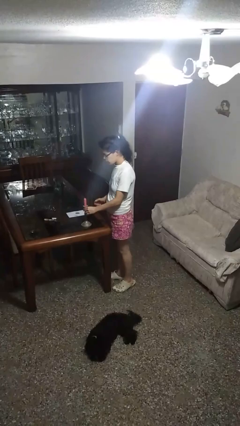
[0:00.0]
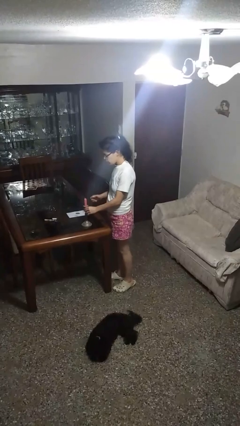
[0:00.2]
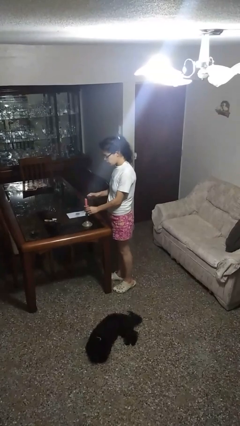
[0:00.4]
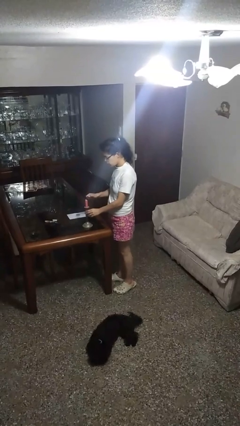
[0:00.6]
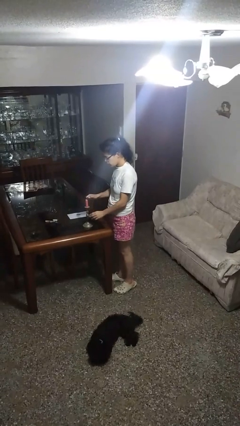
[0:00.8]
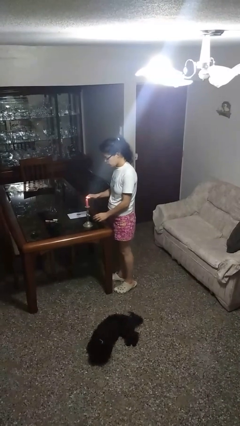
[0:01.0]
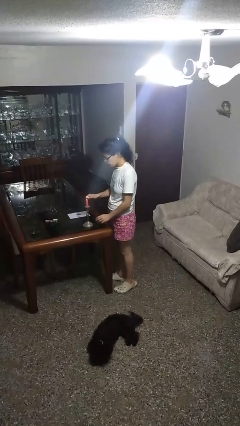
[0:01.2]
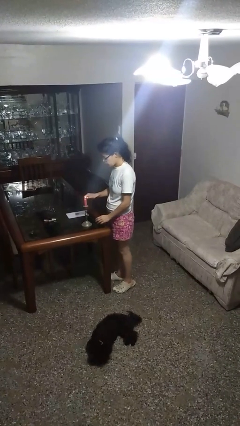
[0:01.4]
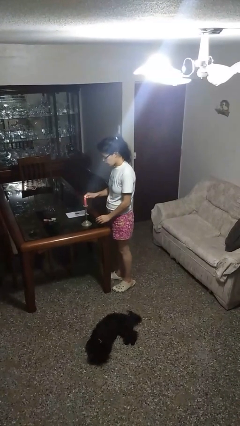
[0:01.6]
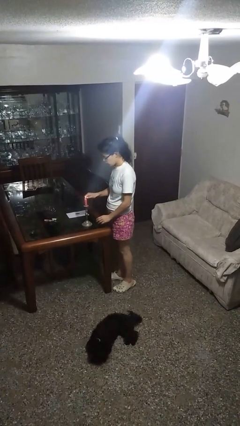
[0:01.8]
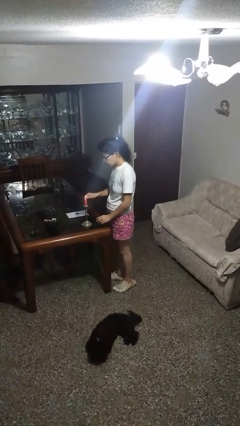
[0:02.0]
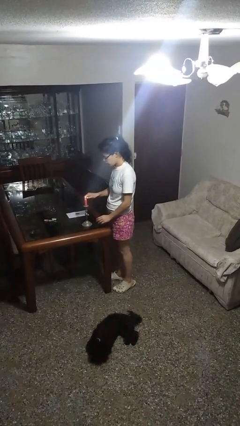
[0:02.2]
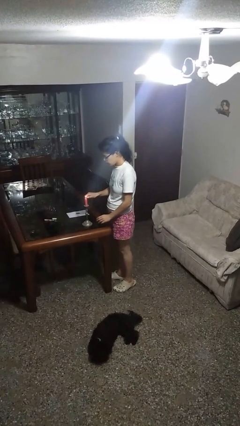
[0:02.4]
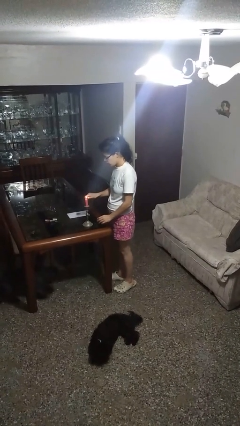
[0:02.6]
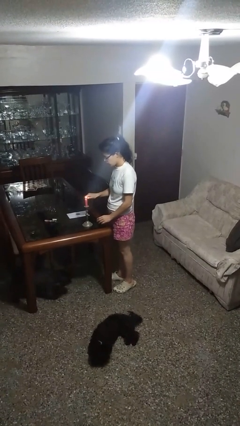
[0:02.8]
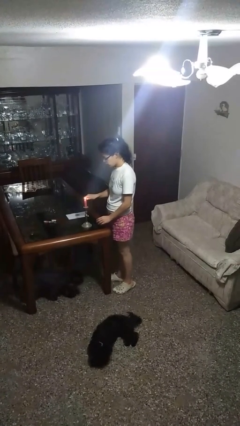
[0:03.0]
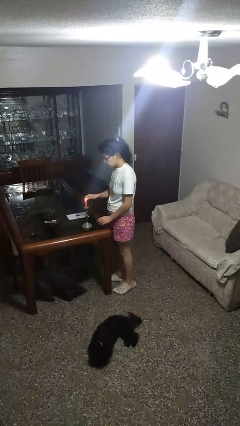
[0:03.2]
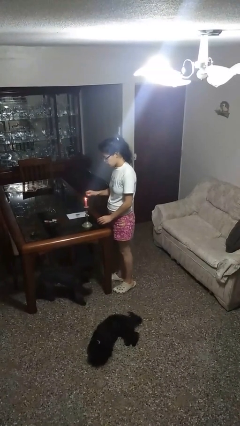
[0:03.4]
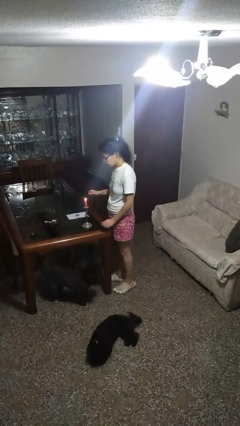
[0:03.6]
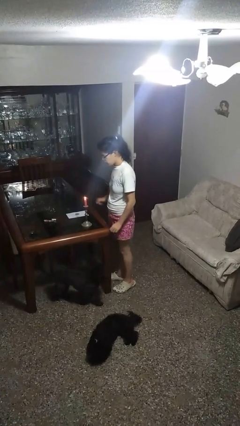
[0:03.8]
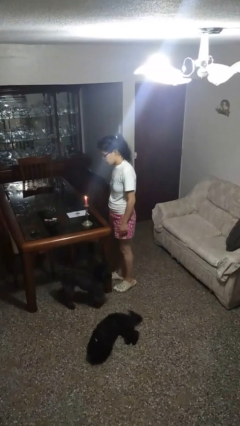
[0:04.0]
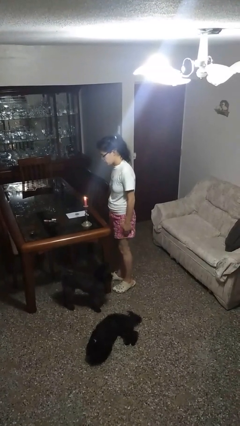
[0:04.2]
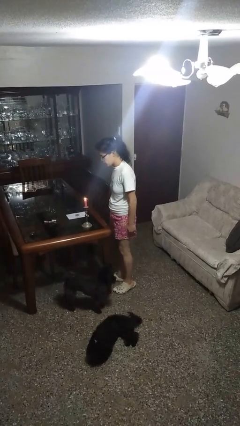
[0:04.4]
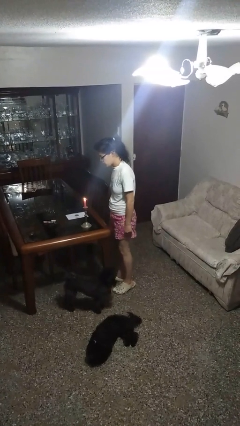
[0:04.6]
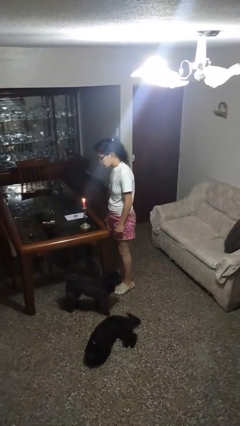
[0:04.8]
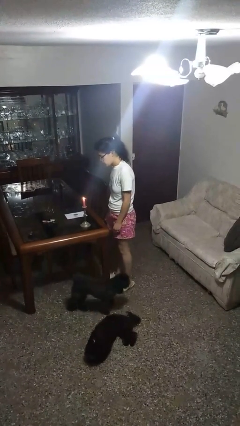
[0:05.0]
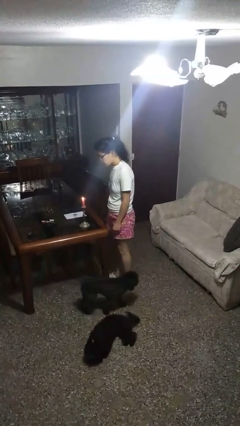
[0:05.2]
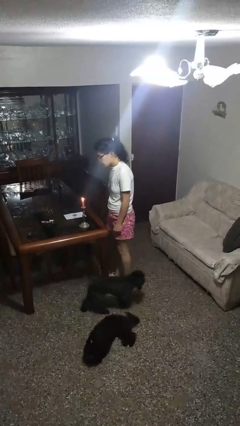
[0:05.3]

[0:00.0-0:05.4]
person lights candle

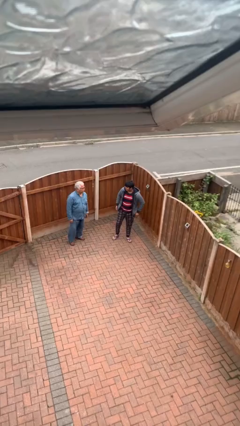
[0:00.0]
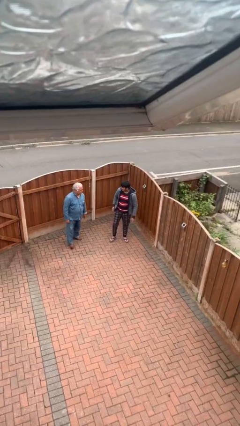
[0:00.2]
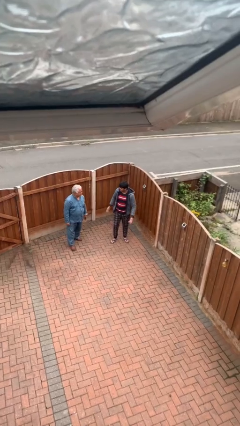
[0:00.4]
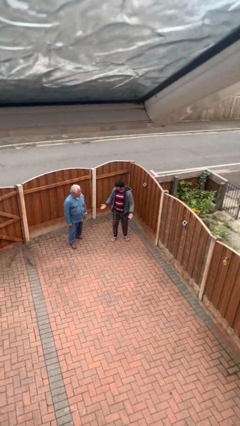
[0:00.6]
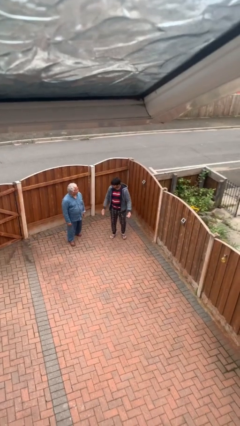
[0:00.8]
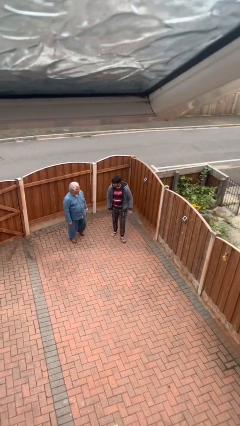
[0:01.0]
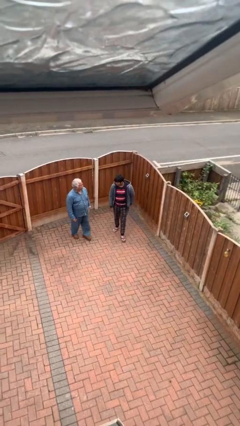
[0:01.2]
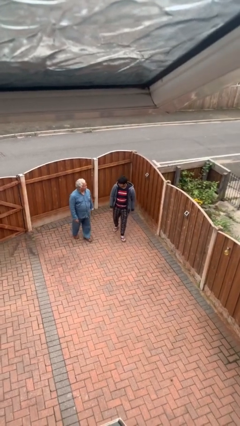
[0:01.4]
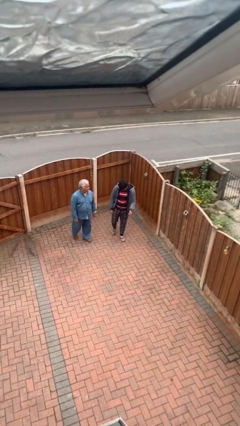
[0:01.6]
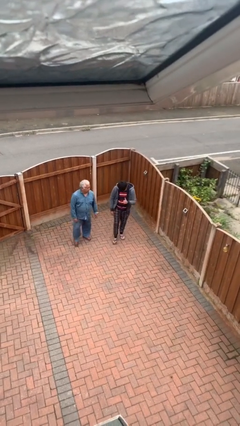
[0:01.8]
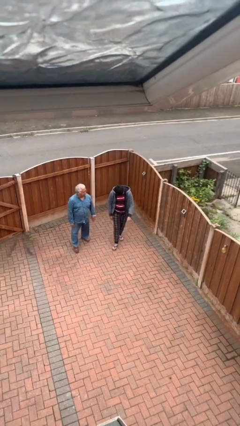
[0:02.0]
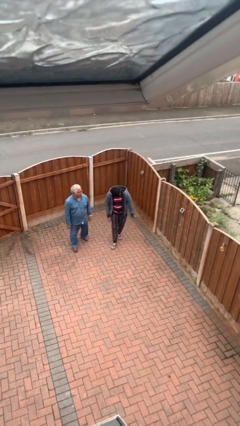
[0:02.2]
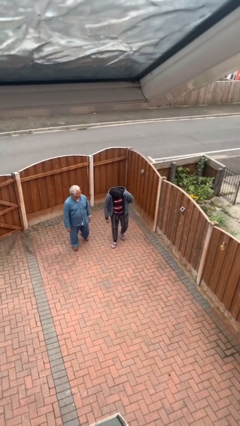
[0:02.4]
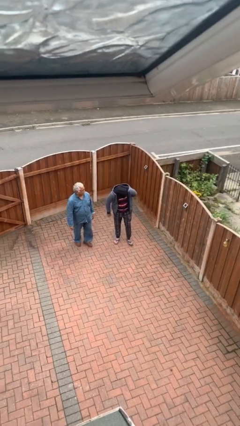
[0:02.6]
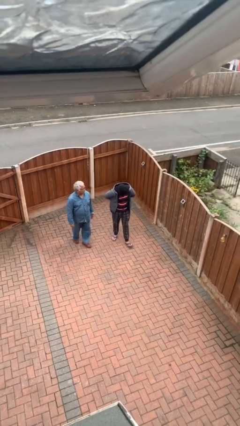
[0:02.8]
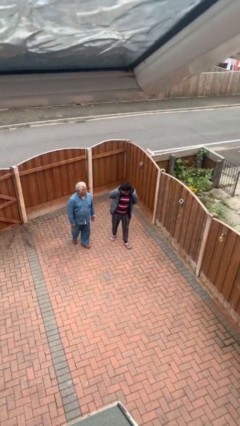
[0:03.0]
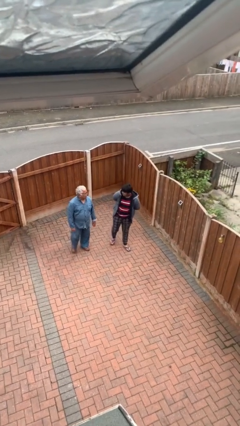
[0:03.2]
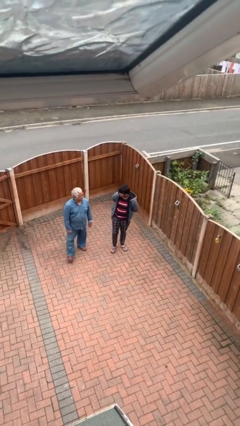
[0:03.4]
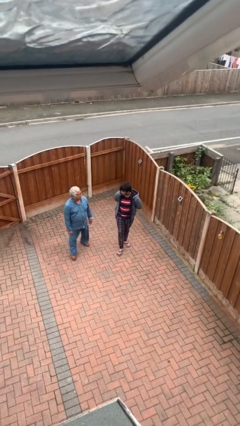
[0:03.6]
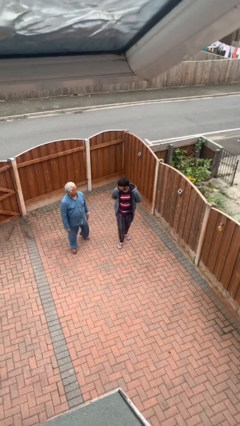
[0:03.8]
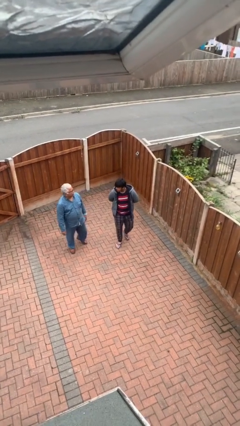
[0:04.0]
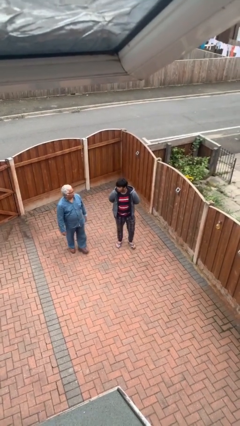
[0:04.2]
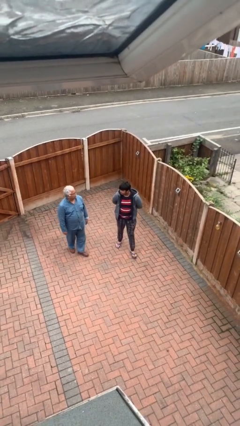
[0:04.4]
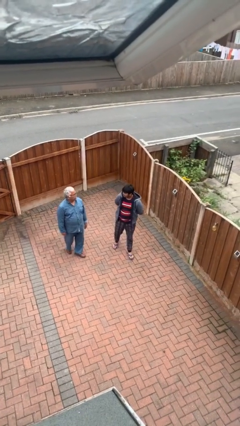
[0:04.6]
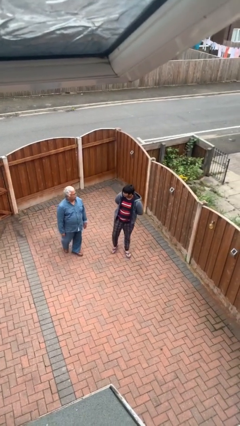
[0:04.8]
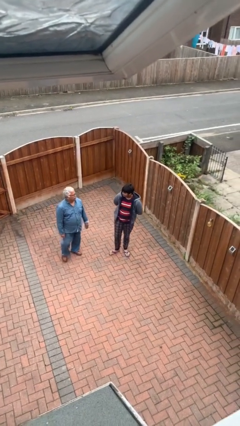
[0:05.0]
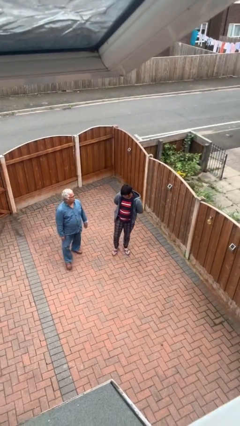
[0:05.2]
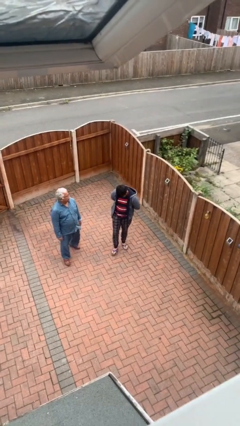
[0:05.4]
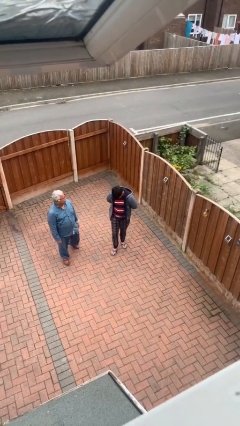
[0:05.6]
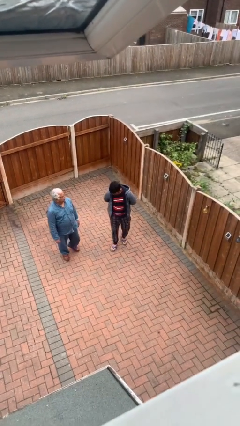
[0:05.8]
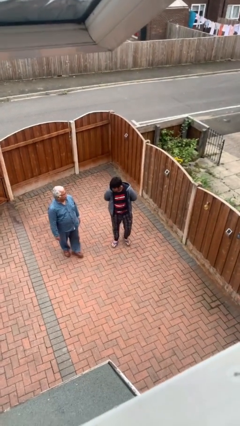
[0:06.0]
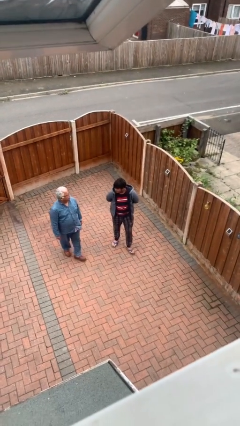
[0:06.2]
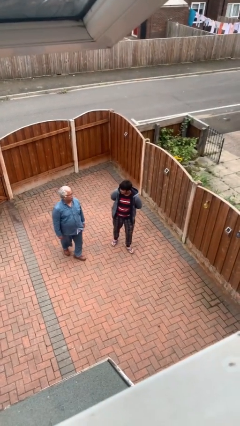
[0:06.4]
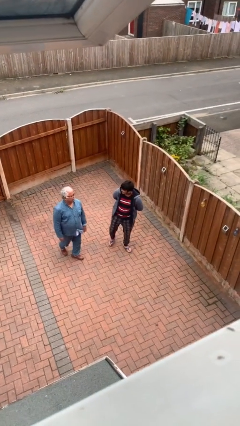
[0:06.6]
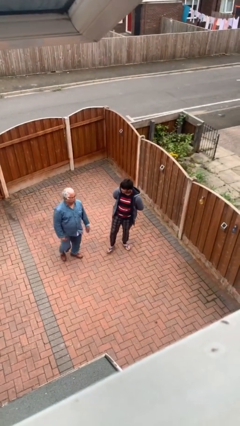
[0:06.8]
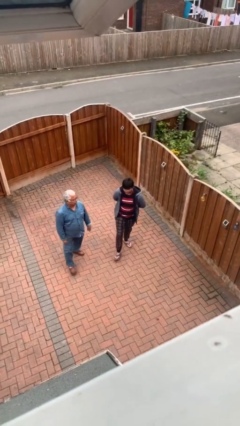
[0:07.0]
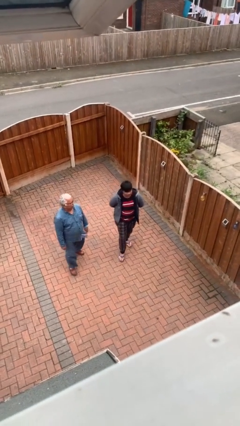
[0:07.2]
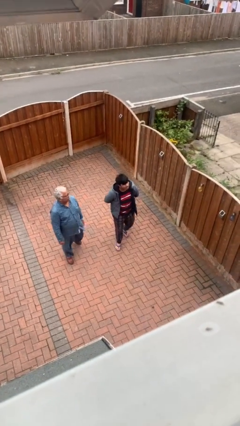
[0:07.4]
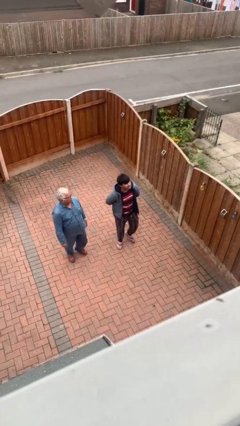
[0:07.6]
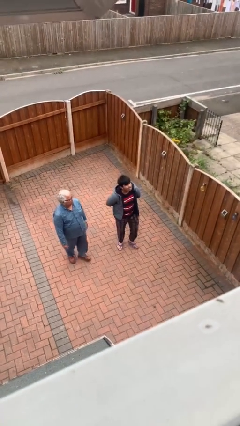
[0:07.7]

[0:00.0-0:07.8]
person talks to person

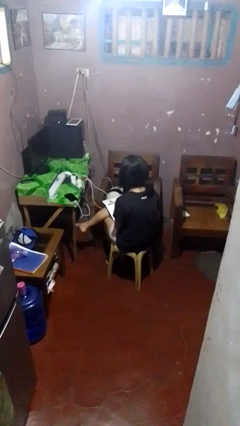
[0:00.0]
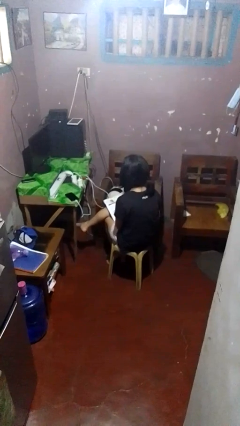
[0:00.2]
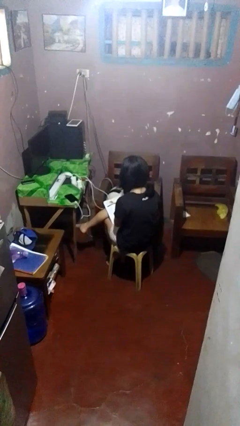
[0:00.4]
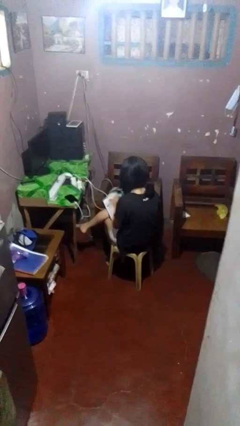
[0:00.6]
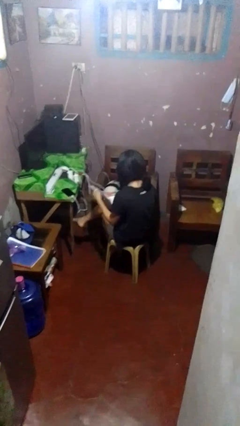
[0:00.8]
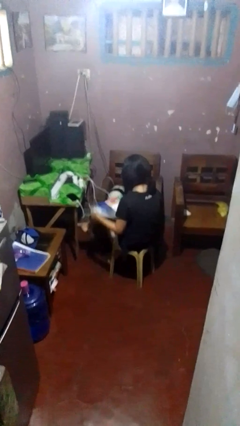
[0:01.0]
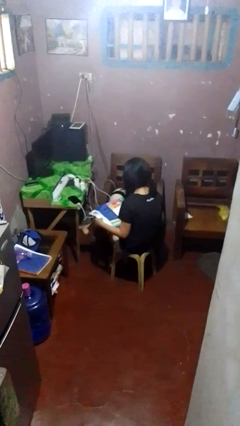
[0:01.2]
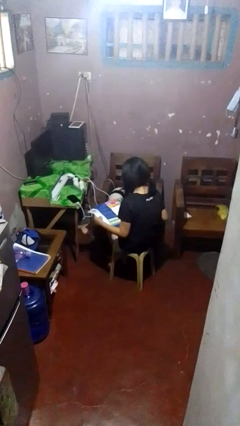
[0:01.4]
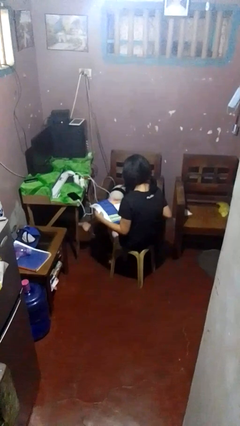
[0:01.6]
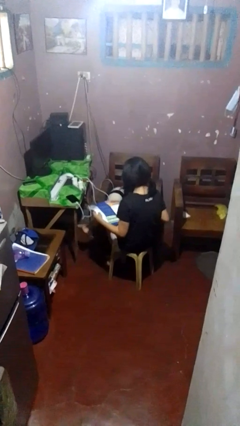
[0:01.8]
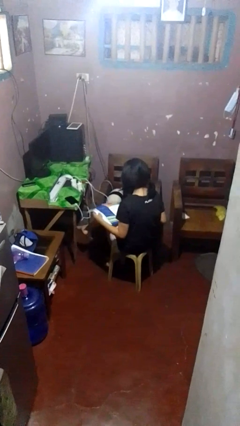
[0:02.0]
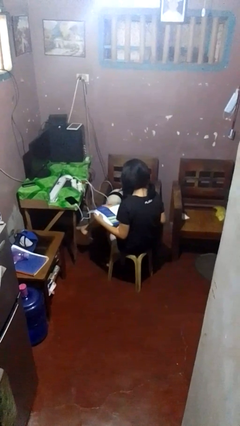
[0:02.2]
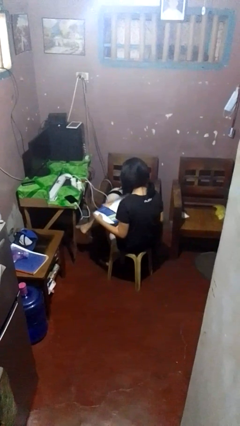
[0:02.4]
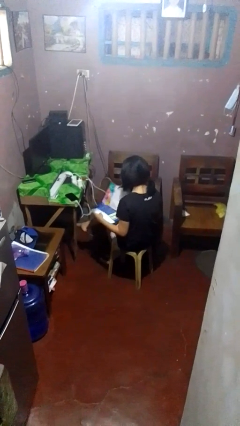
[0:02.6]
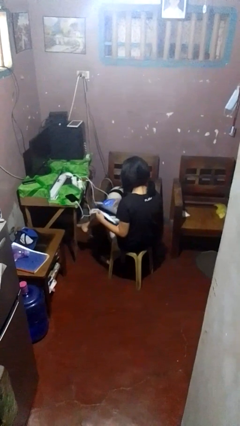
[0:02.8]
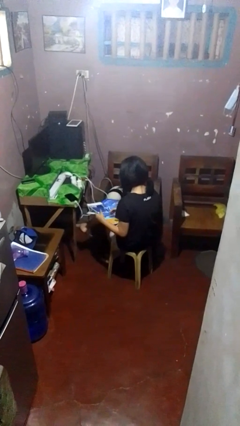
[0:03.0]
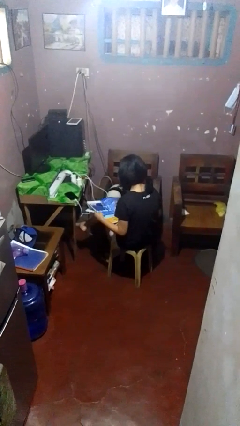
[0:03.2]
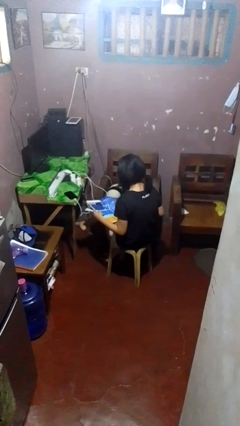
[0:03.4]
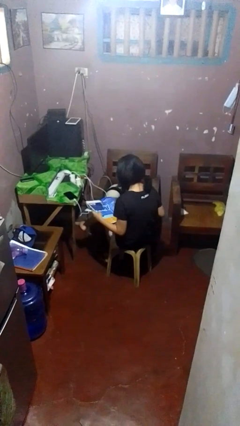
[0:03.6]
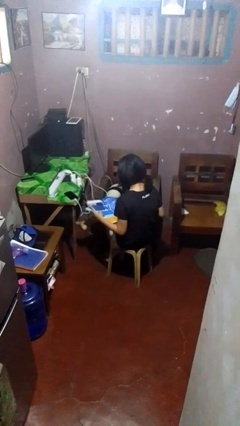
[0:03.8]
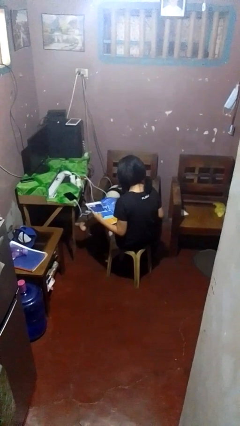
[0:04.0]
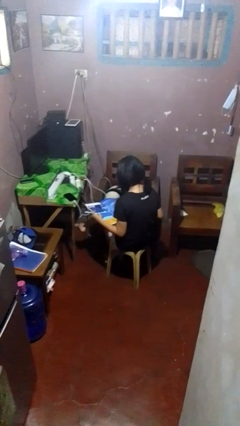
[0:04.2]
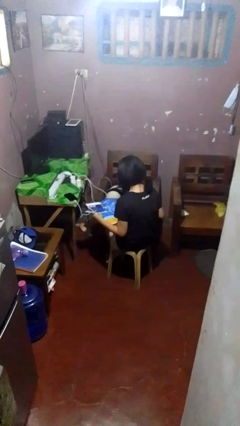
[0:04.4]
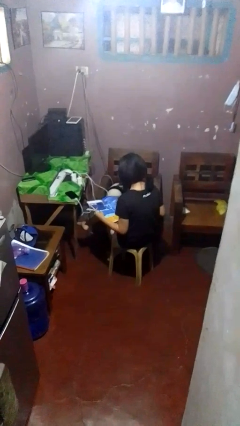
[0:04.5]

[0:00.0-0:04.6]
person reads magazine

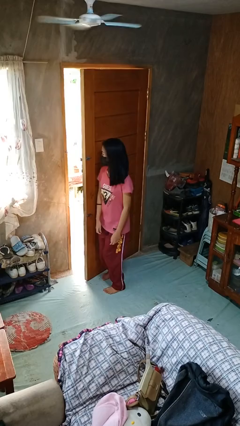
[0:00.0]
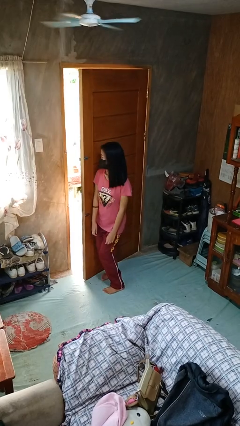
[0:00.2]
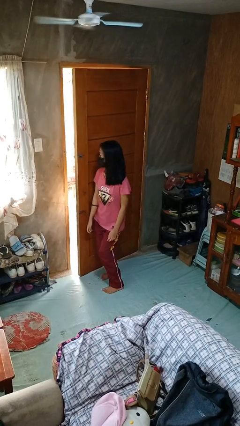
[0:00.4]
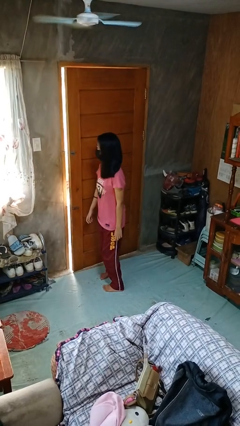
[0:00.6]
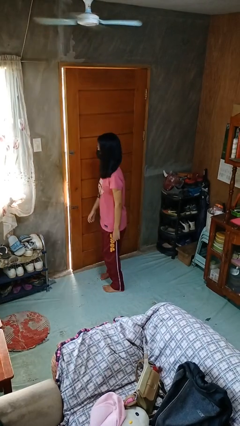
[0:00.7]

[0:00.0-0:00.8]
person closes door with hip
